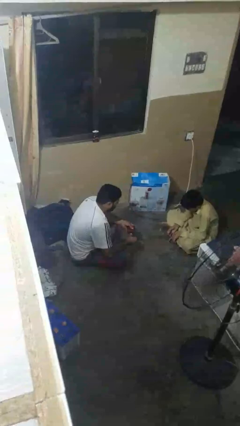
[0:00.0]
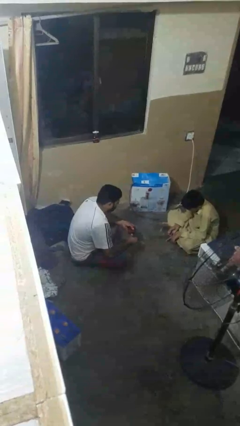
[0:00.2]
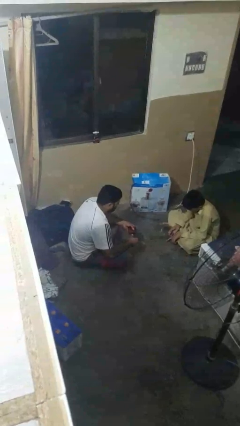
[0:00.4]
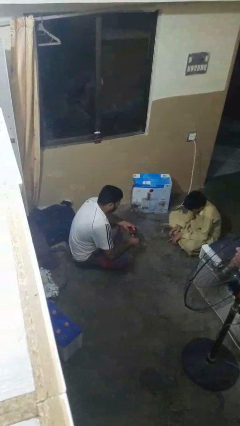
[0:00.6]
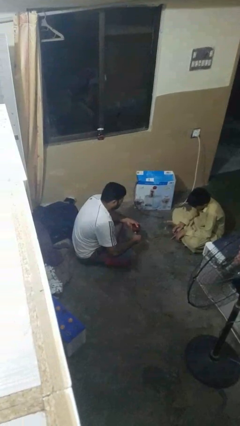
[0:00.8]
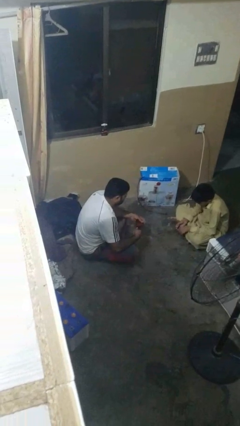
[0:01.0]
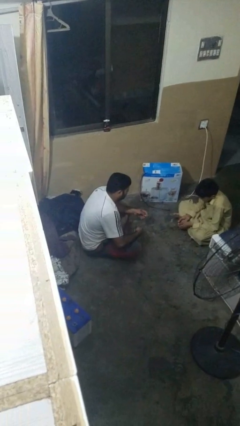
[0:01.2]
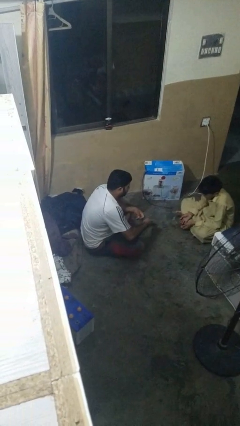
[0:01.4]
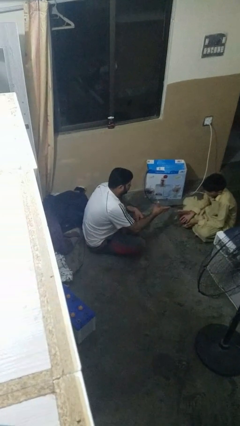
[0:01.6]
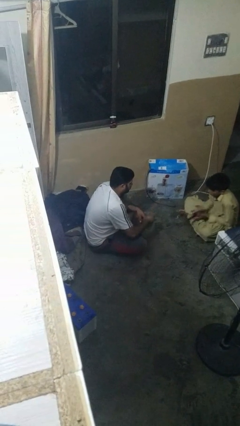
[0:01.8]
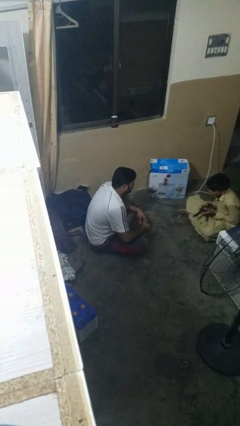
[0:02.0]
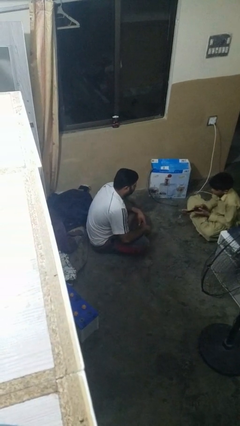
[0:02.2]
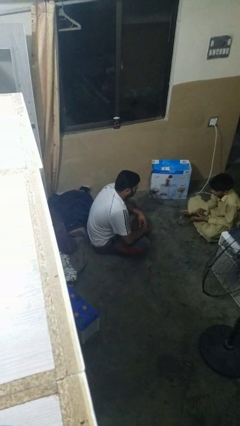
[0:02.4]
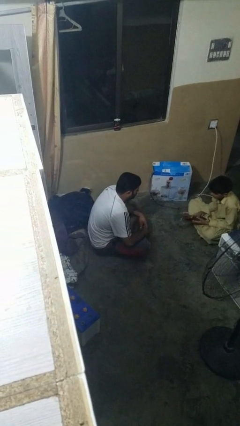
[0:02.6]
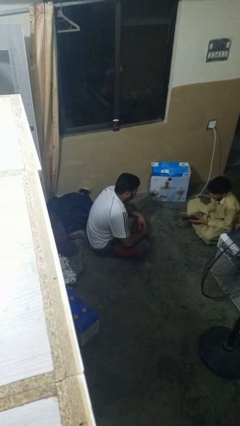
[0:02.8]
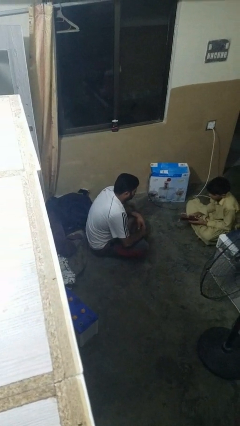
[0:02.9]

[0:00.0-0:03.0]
person throws object to person

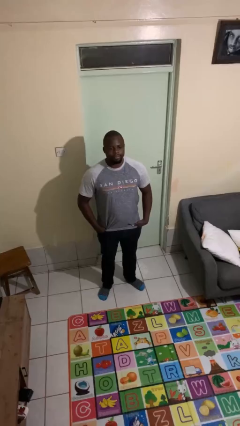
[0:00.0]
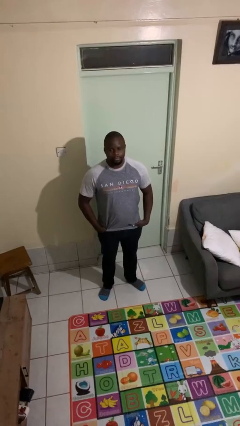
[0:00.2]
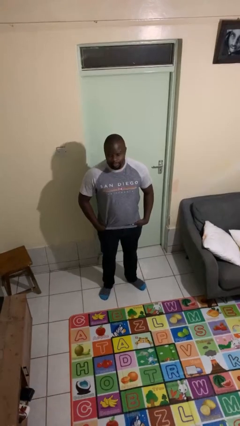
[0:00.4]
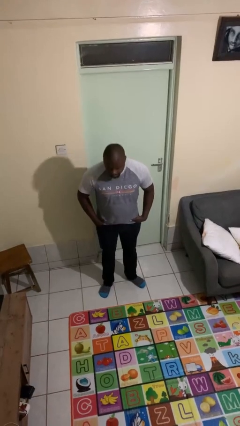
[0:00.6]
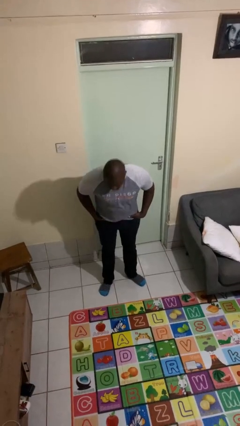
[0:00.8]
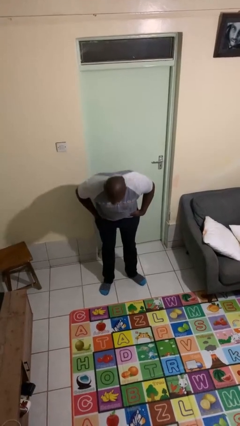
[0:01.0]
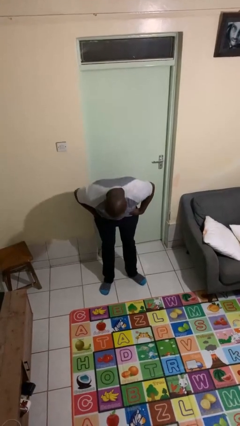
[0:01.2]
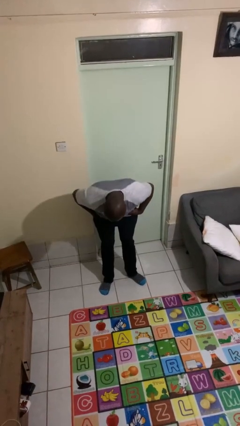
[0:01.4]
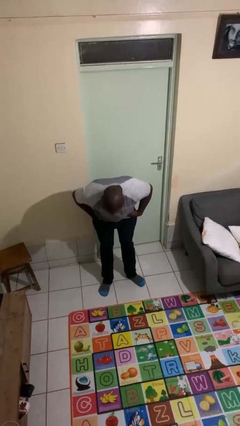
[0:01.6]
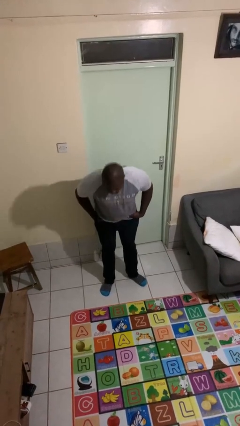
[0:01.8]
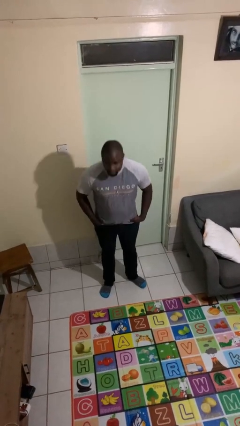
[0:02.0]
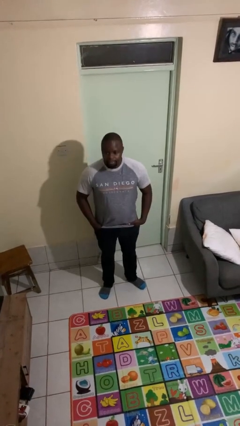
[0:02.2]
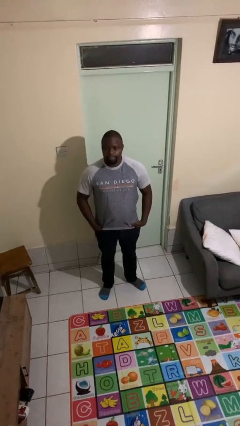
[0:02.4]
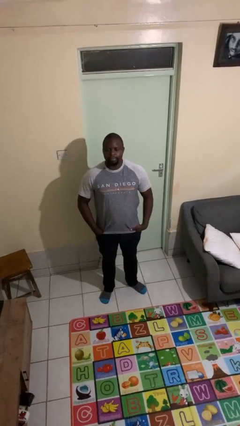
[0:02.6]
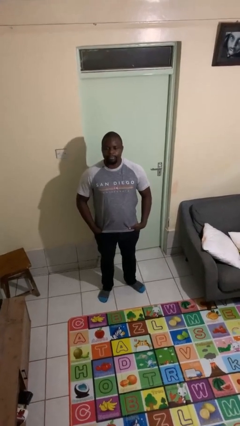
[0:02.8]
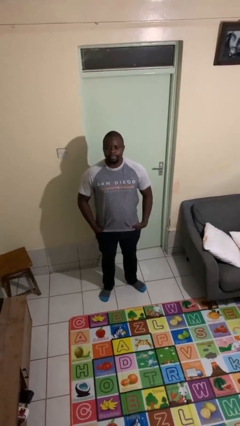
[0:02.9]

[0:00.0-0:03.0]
person bows

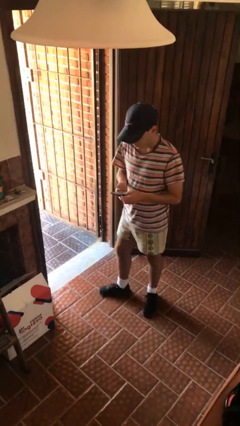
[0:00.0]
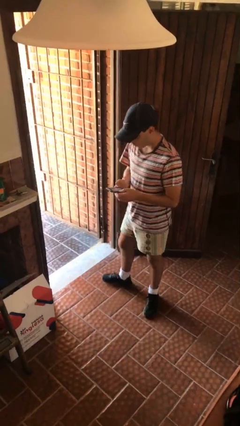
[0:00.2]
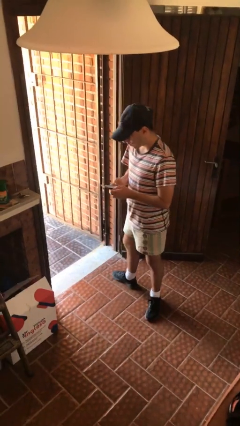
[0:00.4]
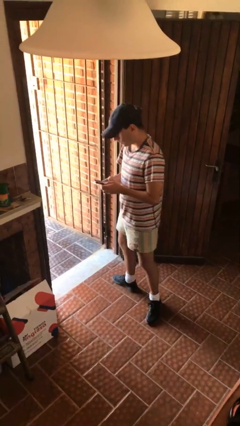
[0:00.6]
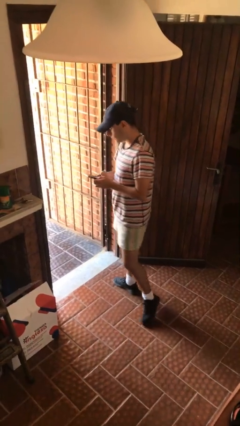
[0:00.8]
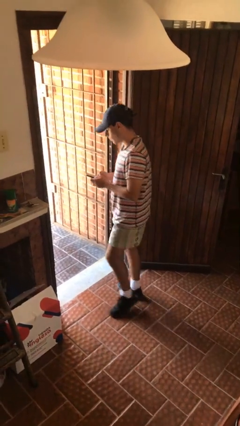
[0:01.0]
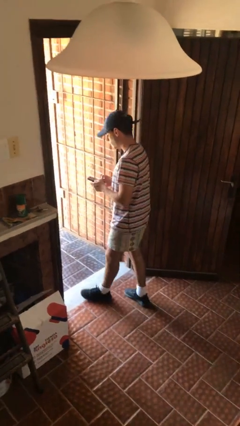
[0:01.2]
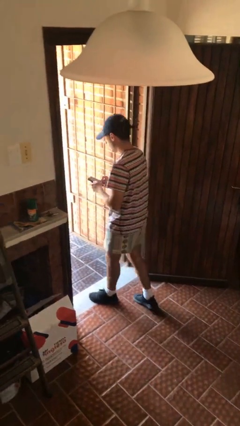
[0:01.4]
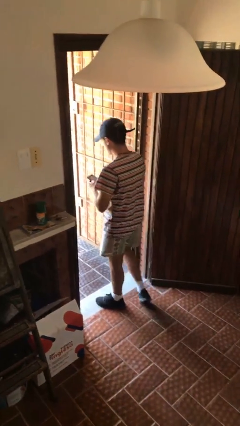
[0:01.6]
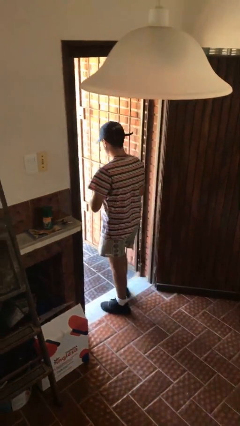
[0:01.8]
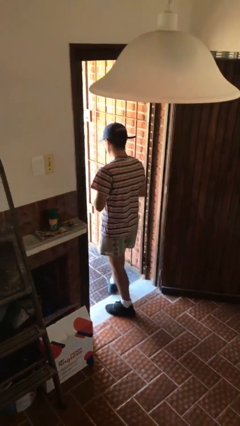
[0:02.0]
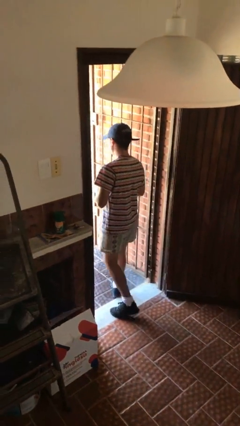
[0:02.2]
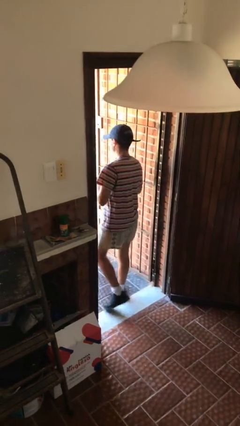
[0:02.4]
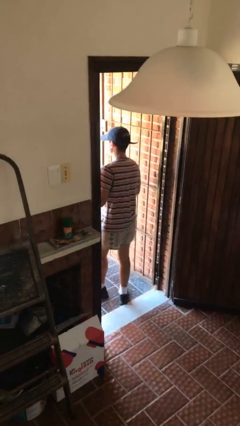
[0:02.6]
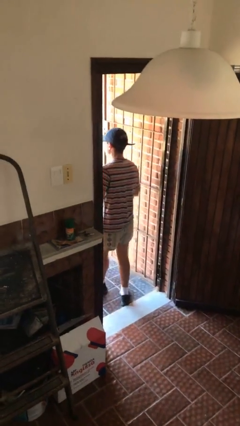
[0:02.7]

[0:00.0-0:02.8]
person exits scene through structure

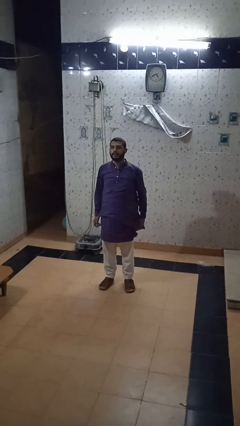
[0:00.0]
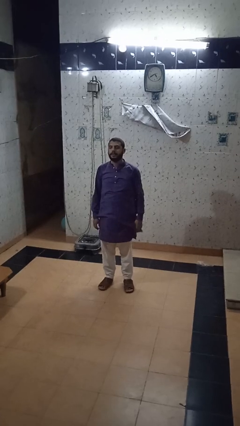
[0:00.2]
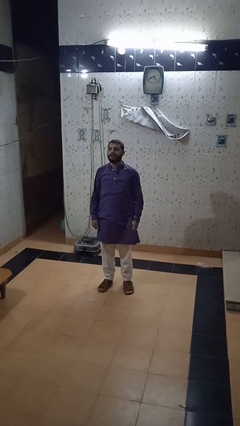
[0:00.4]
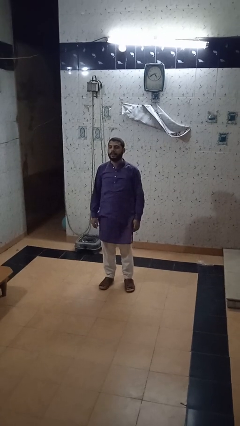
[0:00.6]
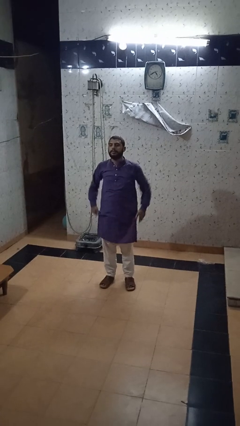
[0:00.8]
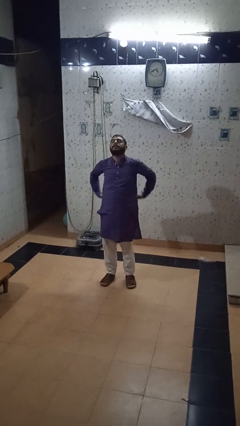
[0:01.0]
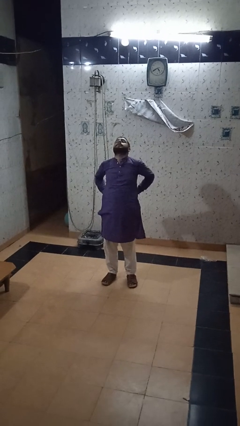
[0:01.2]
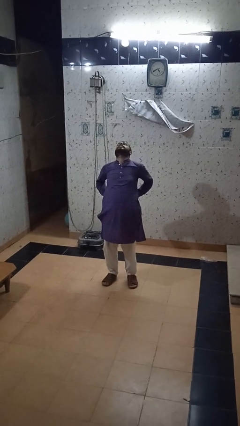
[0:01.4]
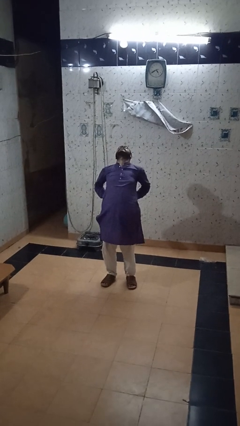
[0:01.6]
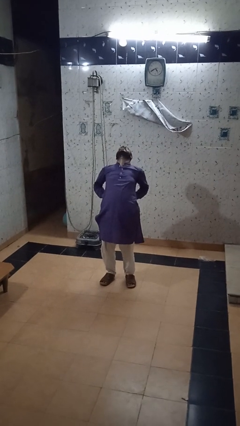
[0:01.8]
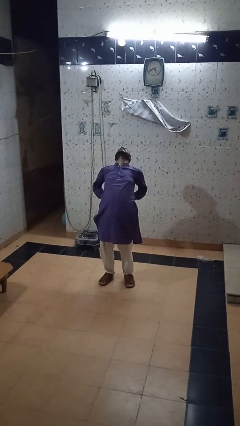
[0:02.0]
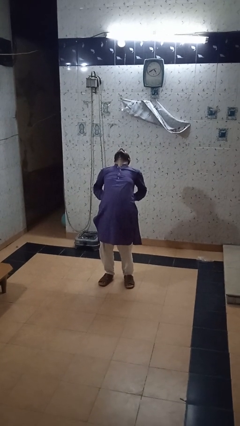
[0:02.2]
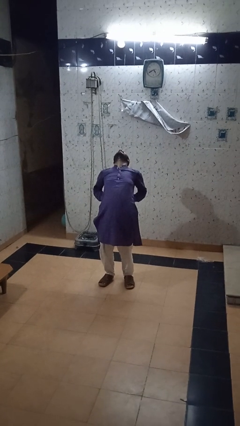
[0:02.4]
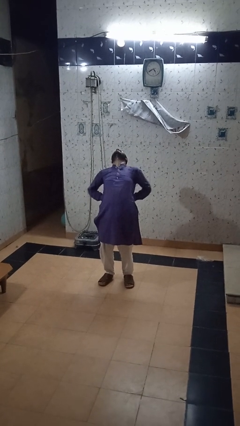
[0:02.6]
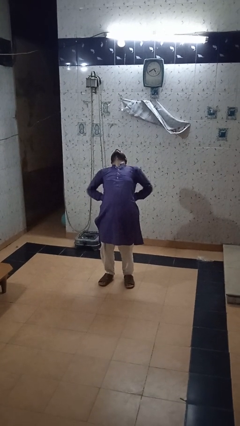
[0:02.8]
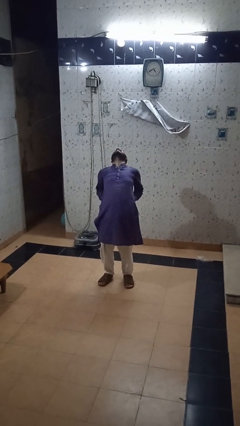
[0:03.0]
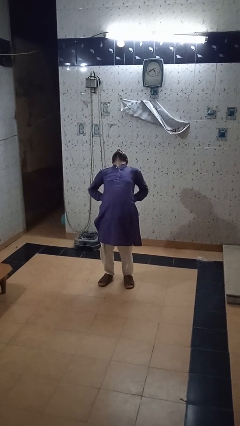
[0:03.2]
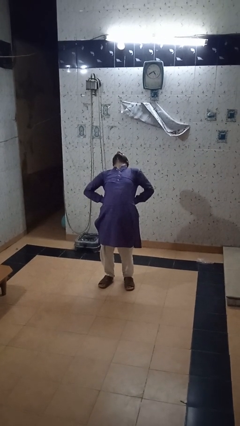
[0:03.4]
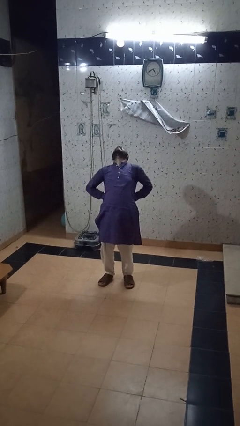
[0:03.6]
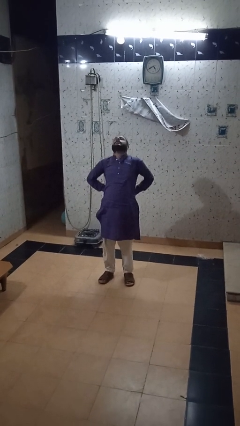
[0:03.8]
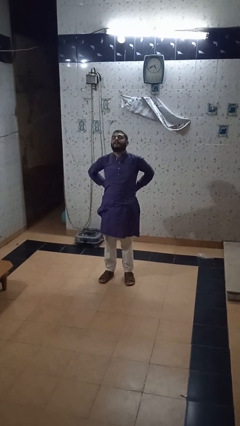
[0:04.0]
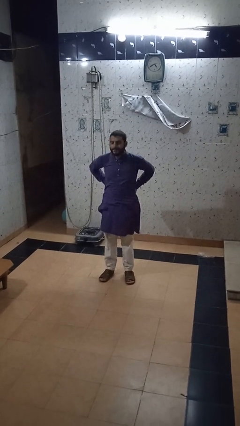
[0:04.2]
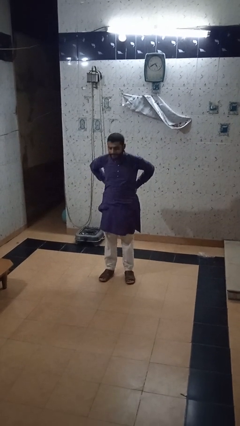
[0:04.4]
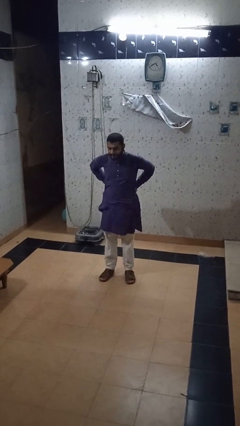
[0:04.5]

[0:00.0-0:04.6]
person stretches back

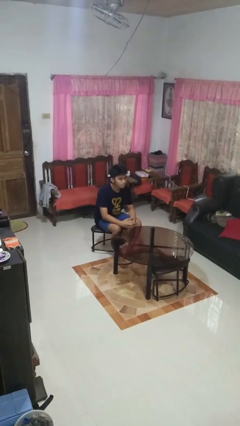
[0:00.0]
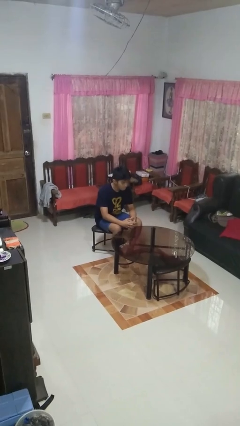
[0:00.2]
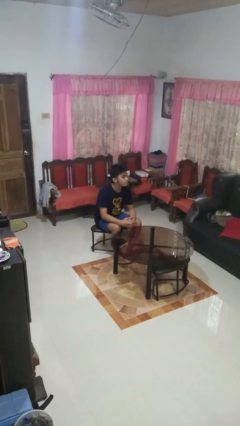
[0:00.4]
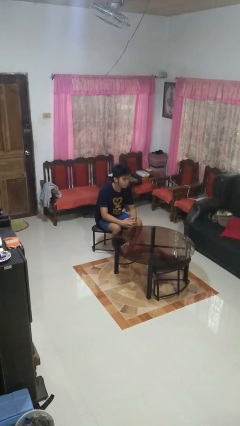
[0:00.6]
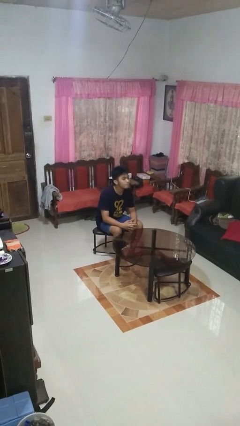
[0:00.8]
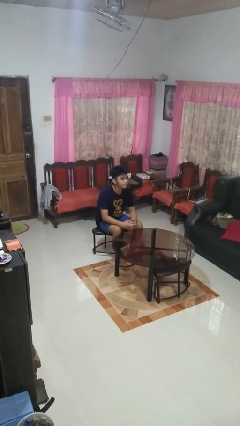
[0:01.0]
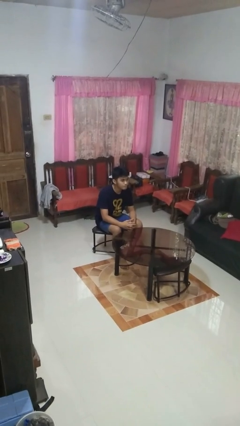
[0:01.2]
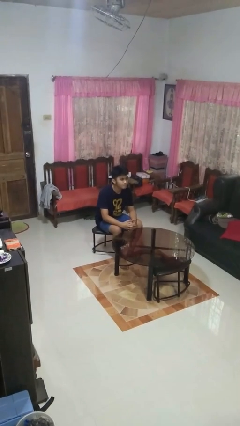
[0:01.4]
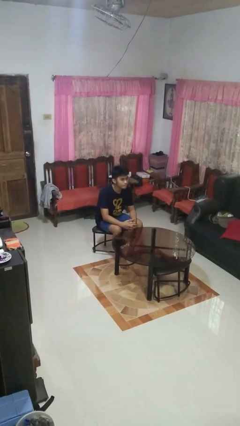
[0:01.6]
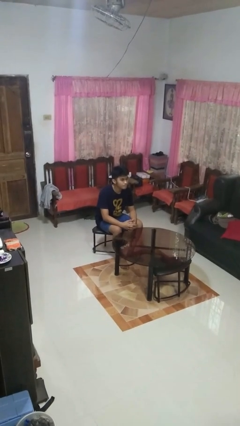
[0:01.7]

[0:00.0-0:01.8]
person nods head

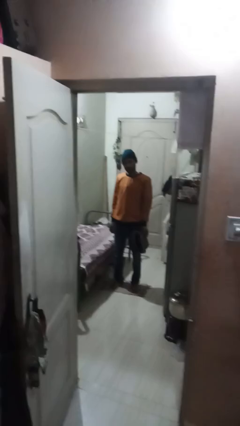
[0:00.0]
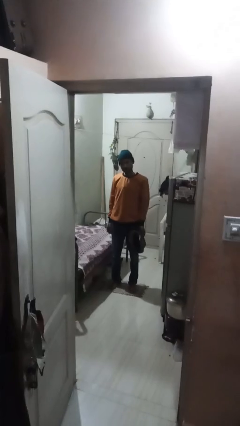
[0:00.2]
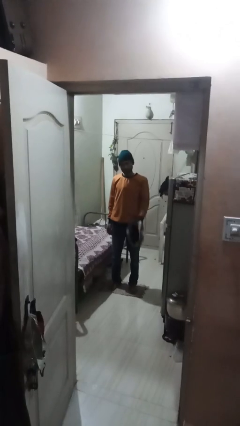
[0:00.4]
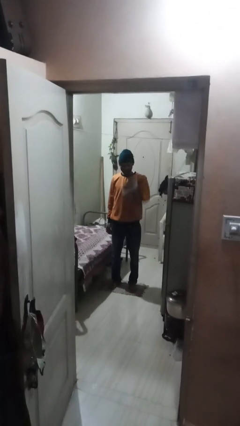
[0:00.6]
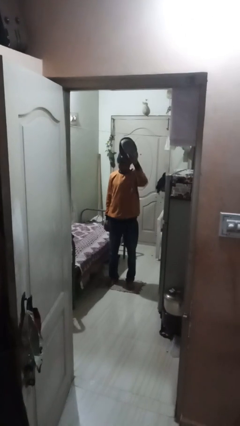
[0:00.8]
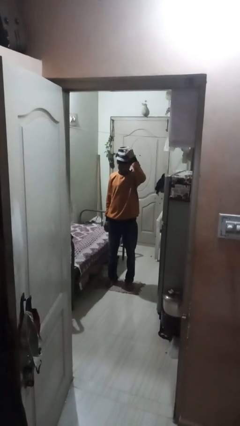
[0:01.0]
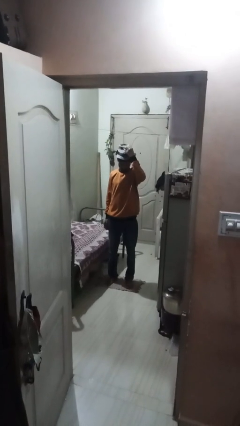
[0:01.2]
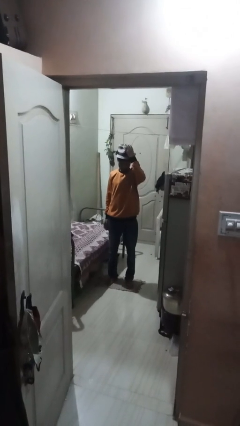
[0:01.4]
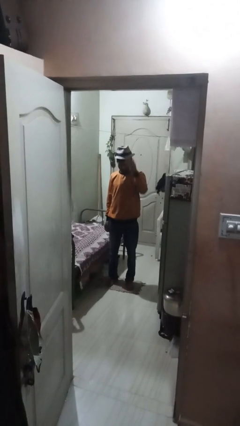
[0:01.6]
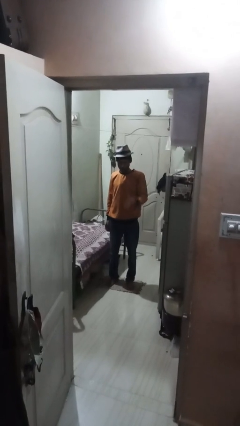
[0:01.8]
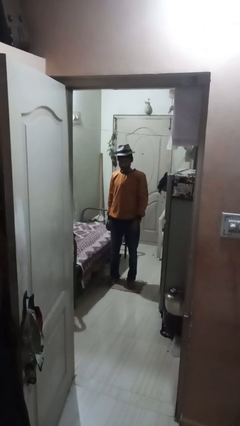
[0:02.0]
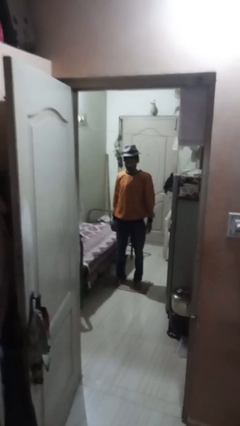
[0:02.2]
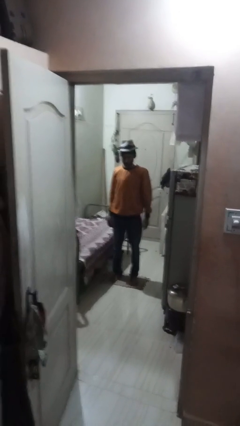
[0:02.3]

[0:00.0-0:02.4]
person puts on hat
